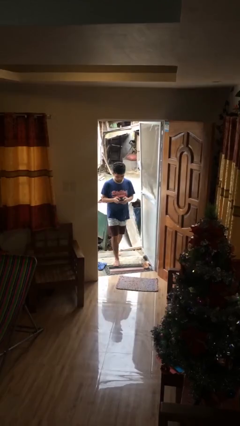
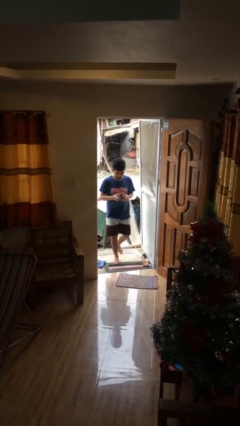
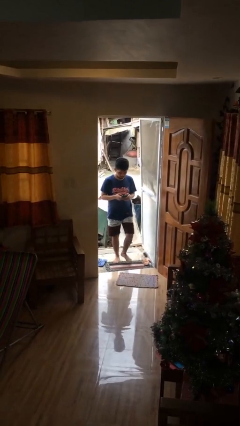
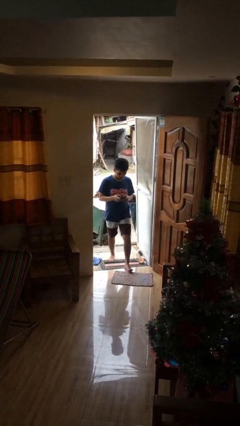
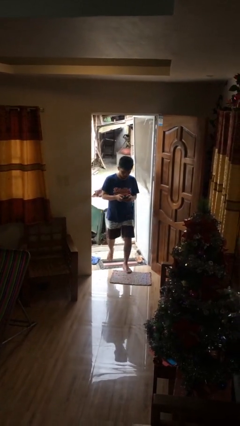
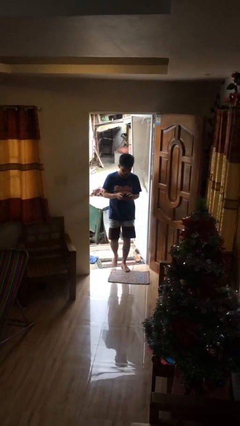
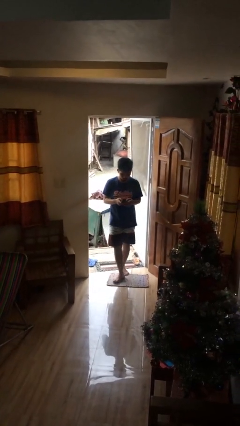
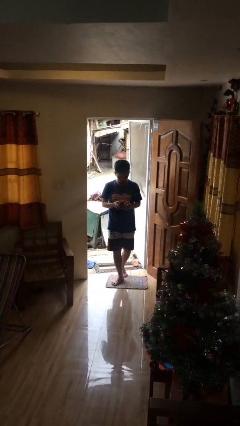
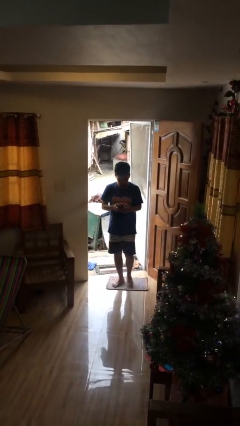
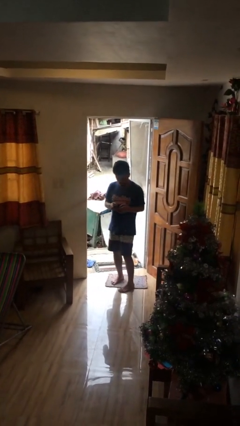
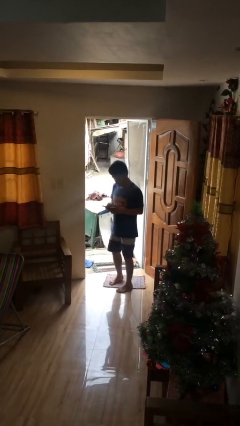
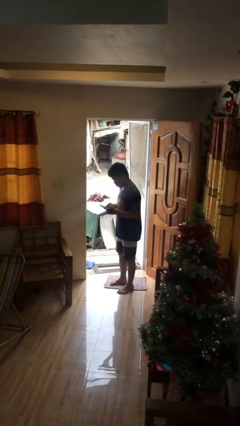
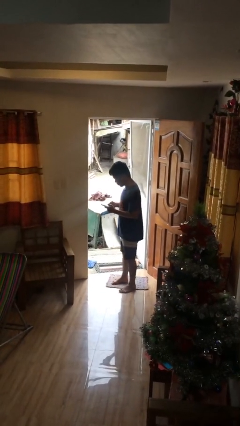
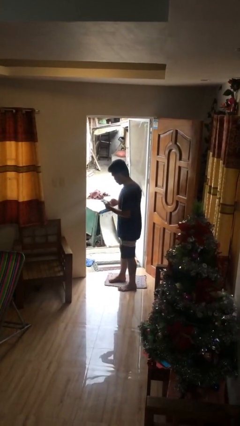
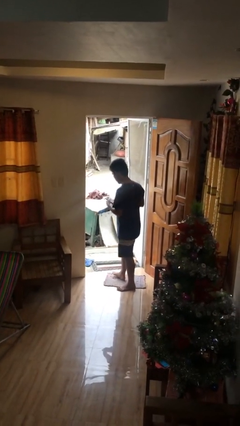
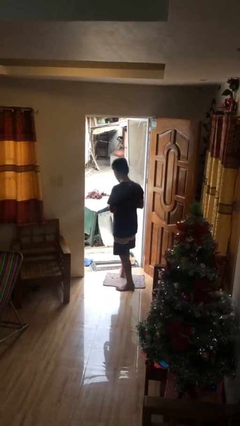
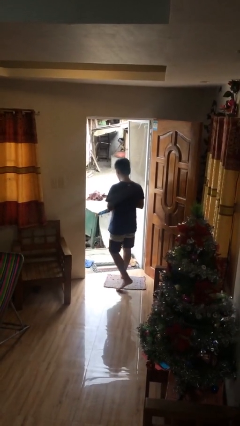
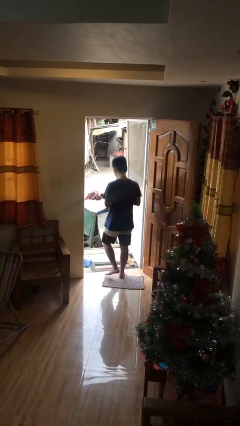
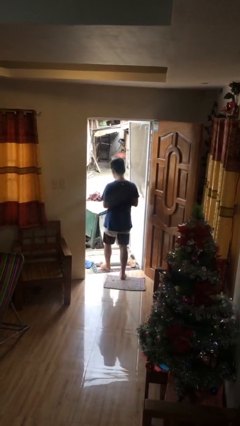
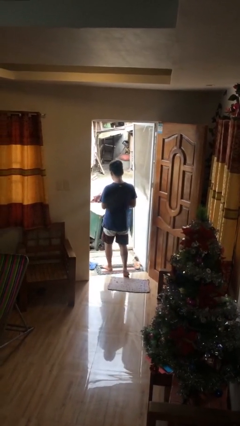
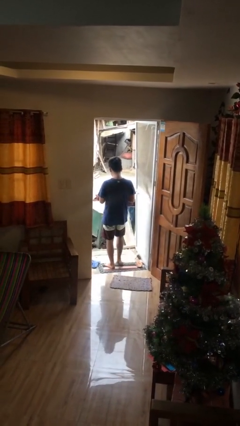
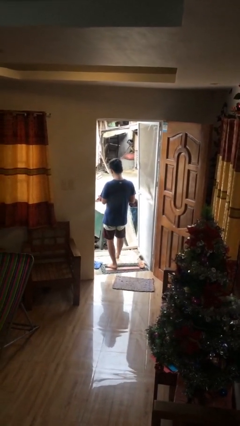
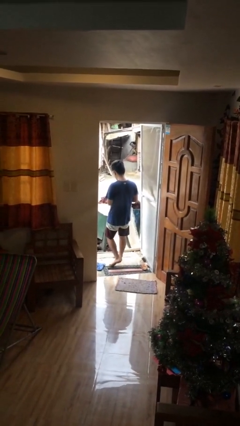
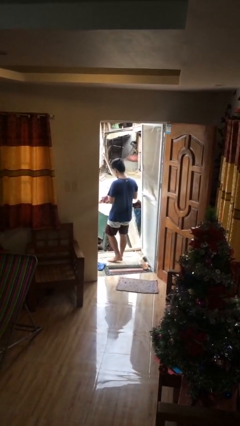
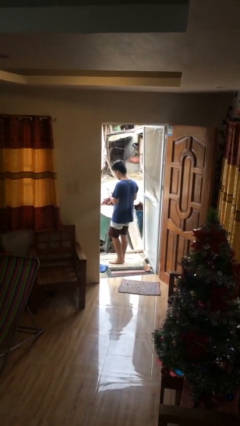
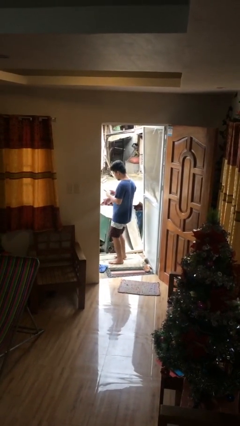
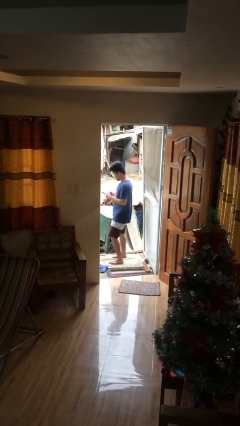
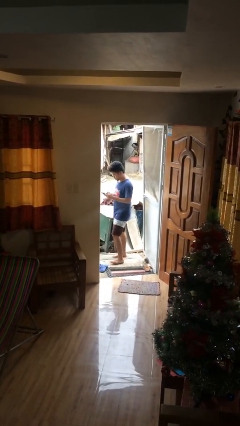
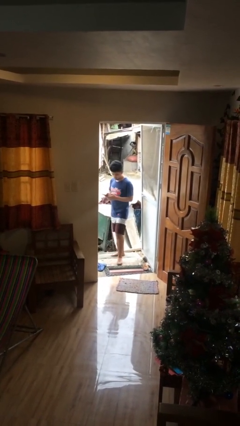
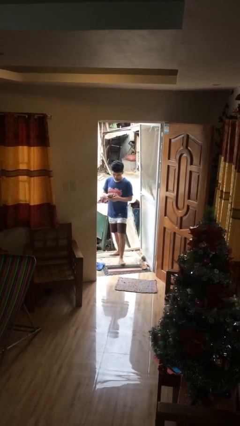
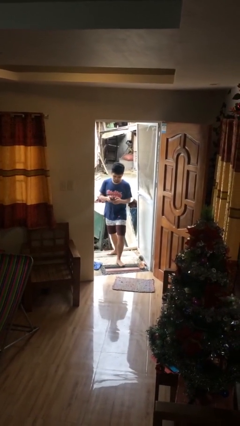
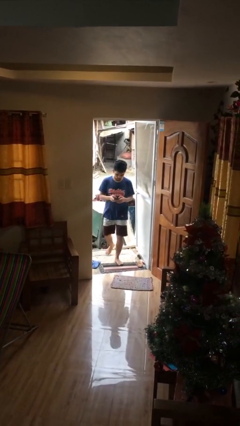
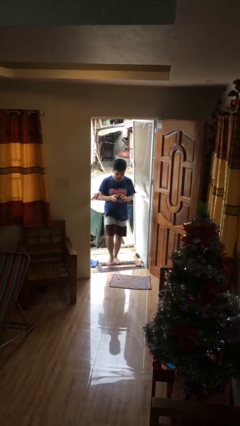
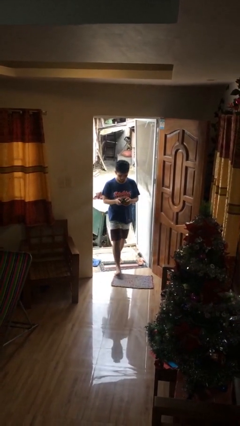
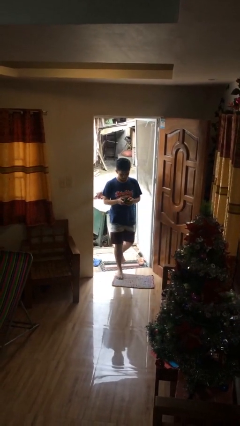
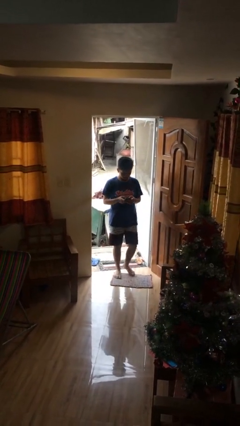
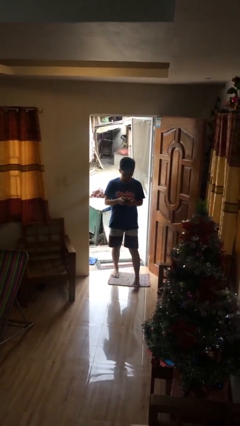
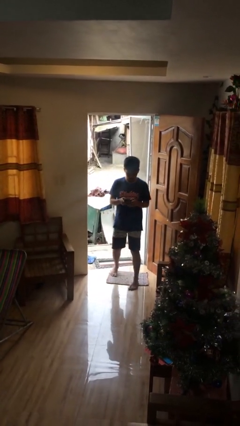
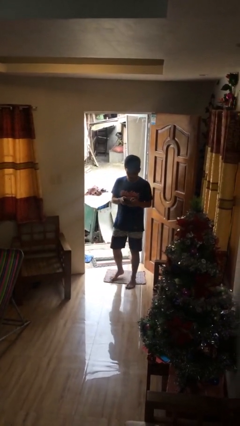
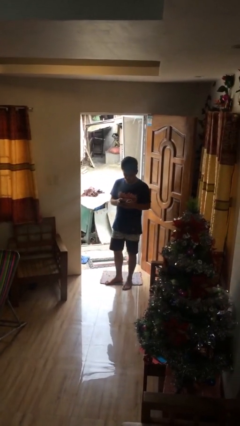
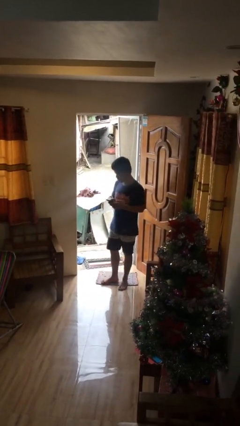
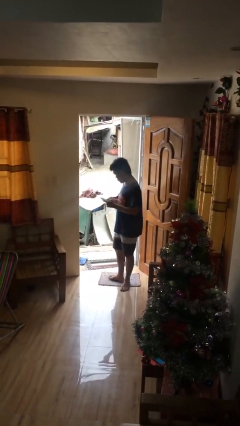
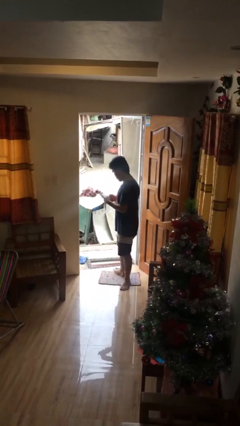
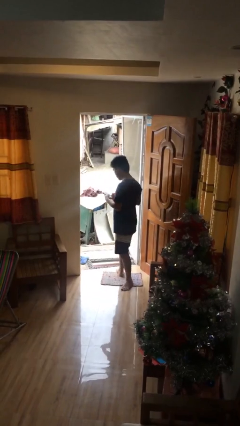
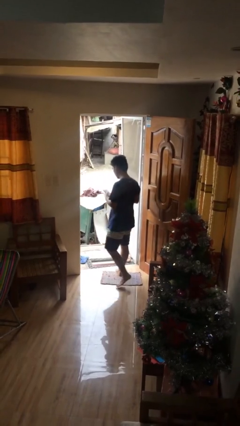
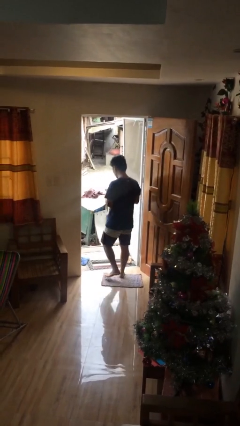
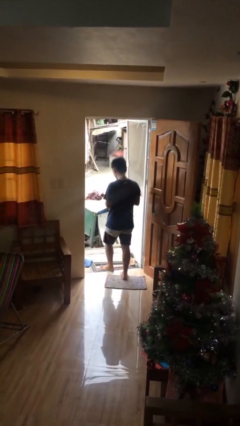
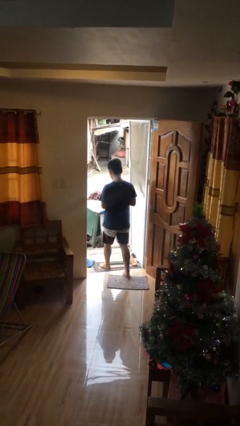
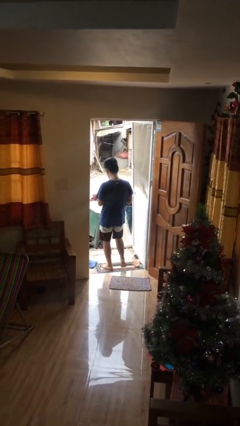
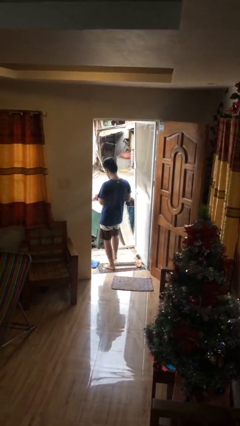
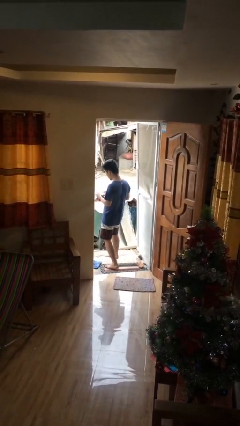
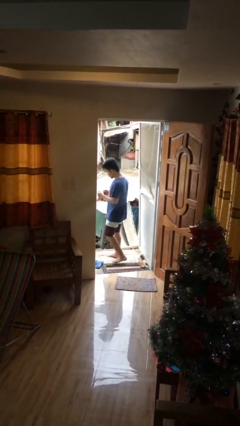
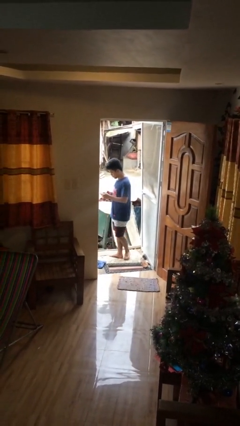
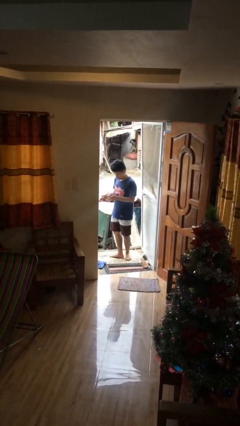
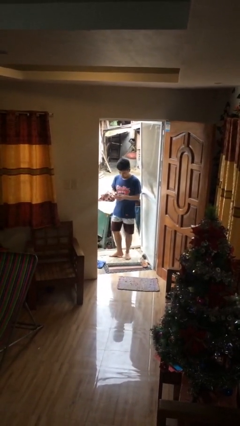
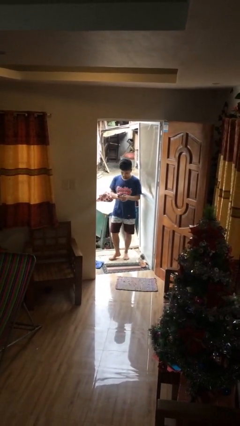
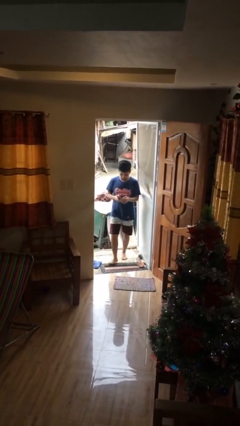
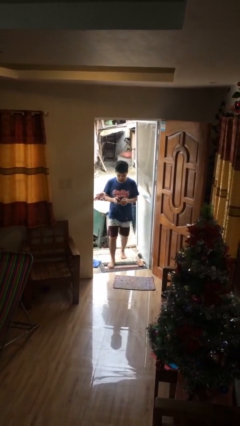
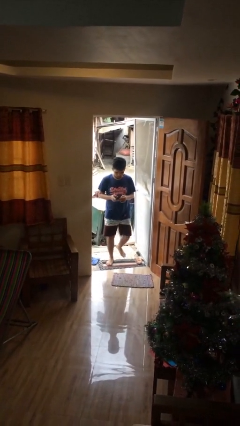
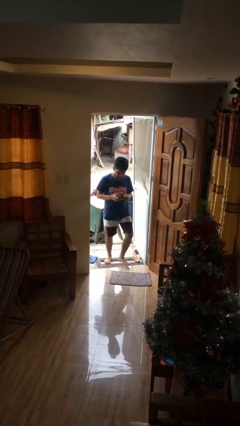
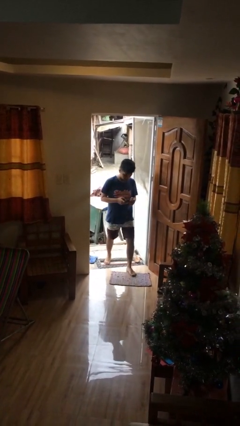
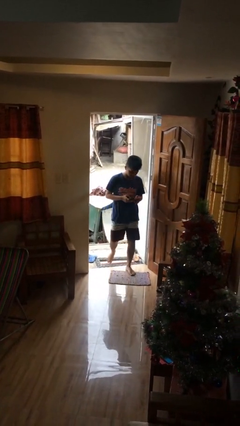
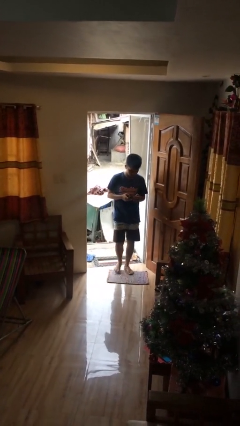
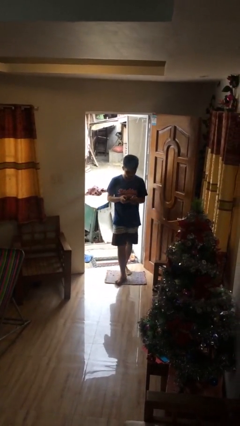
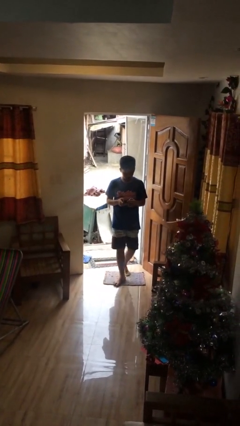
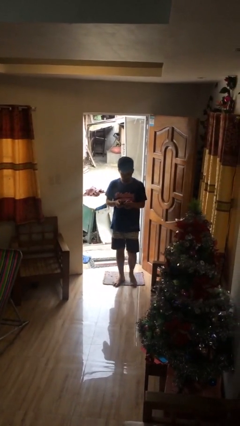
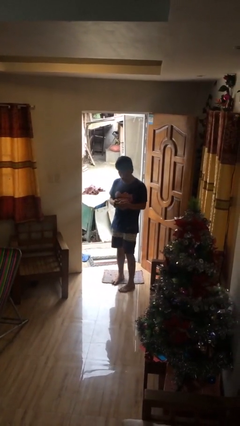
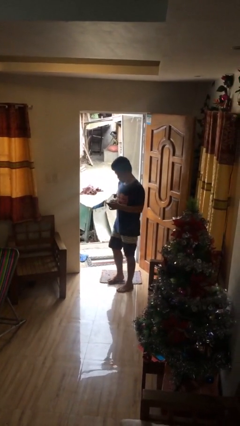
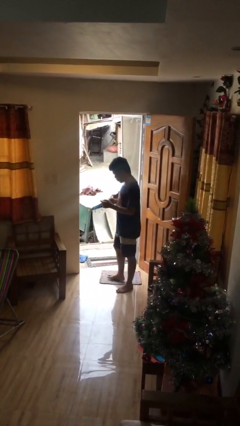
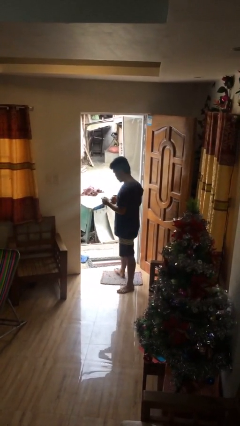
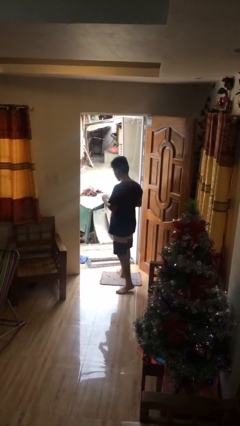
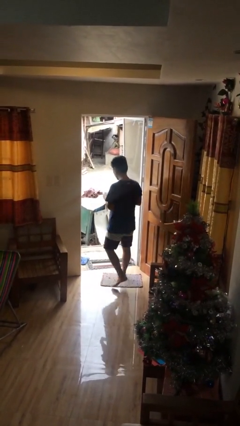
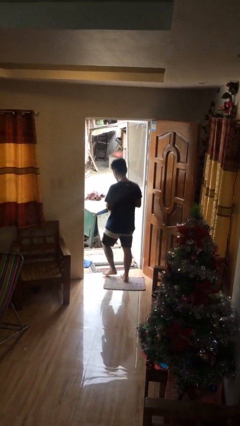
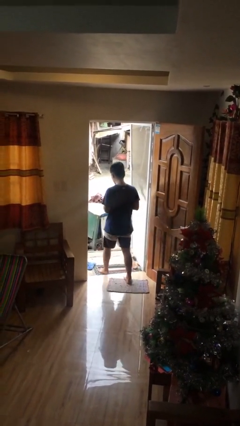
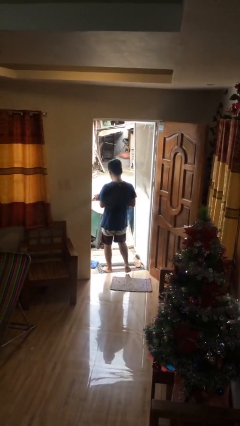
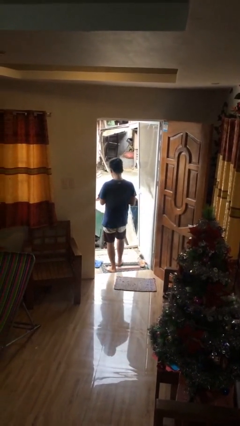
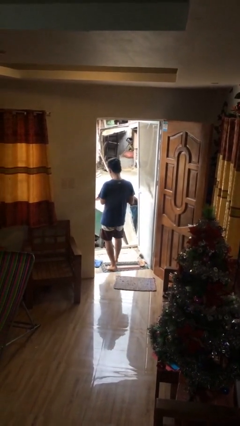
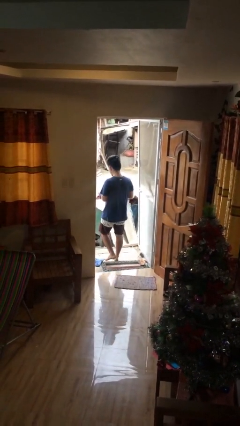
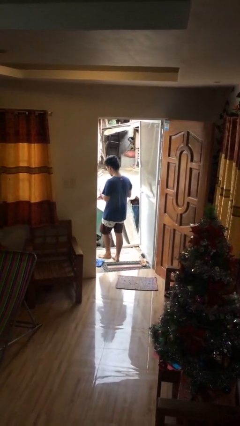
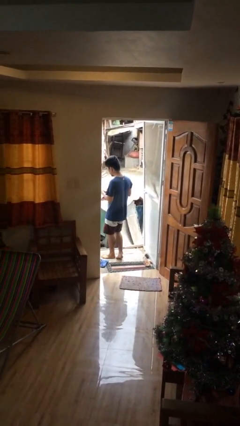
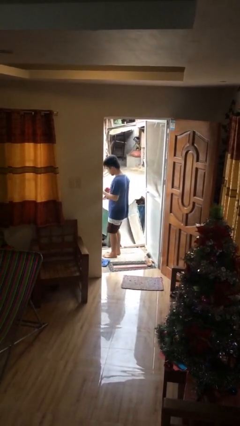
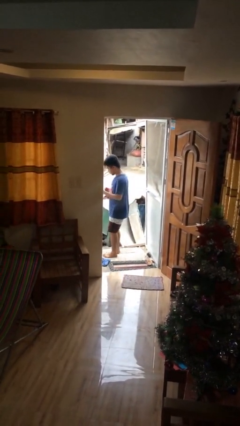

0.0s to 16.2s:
person texts on phone

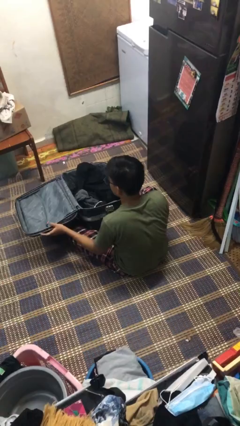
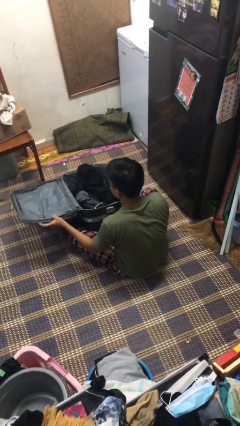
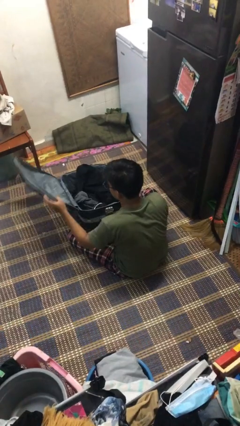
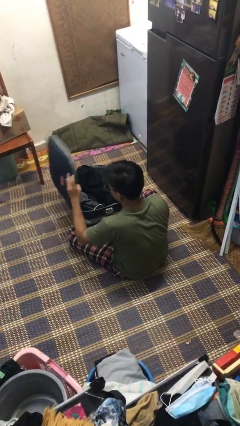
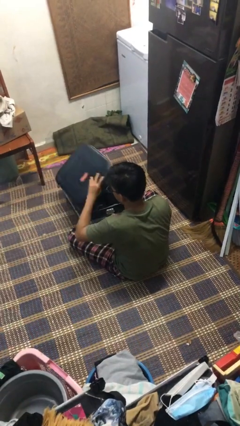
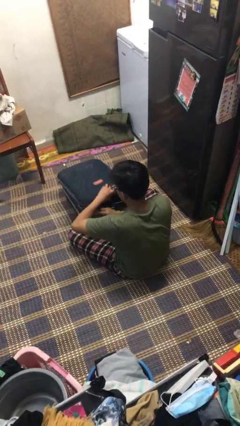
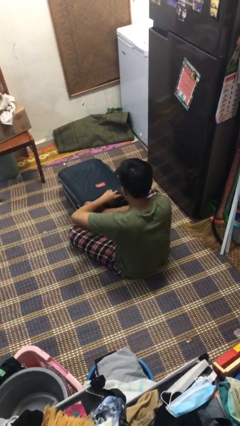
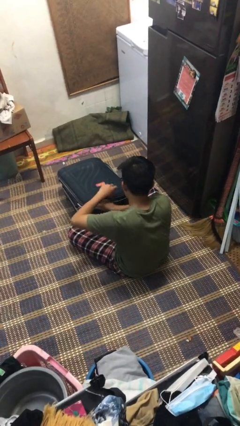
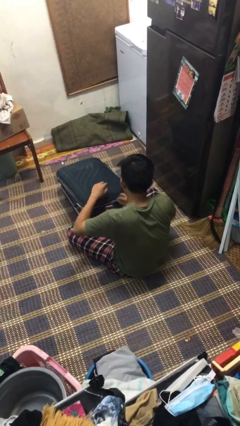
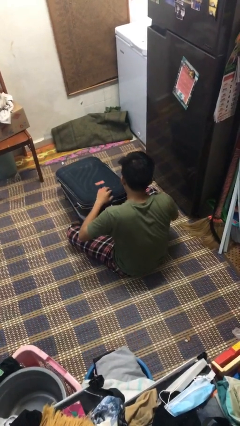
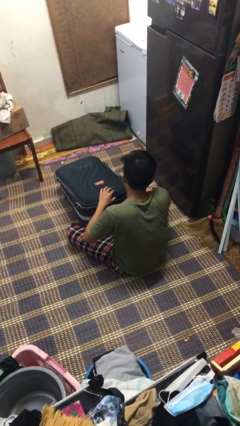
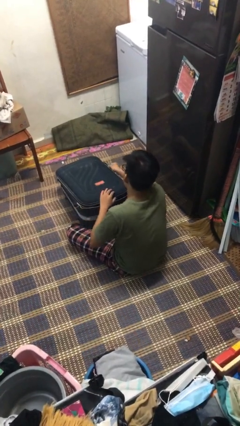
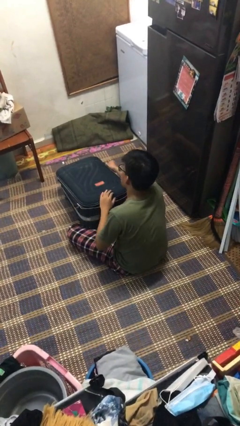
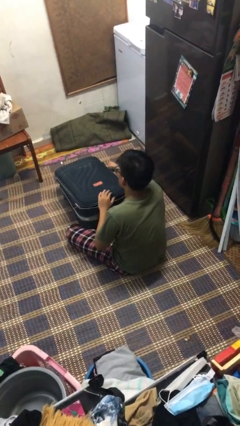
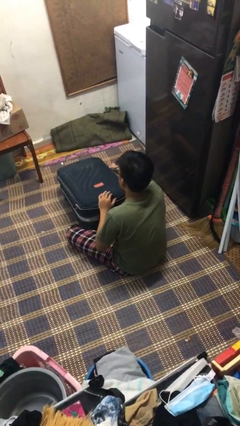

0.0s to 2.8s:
person closes suitcase
